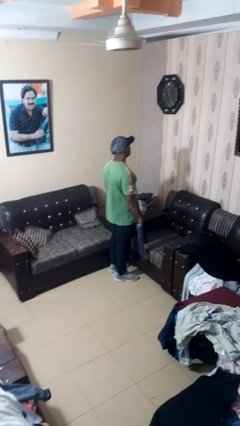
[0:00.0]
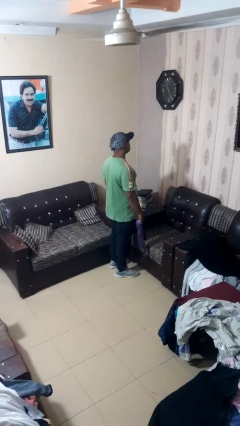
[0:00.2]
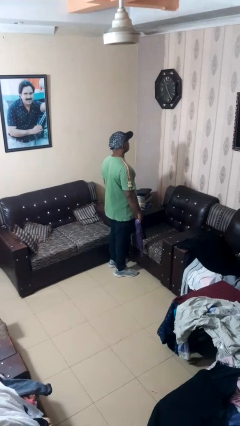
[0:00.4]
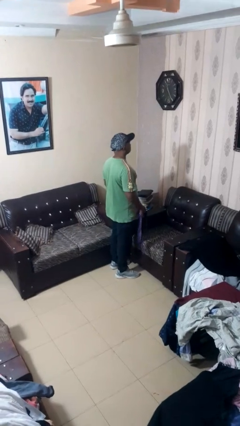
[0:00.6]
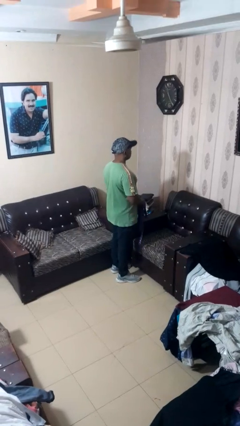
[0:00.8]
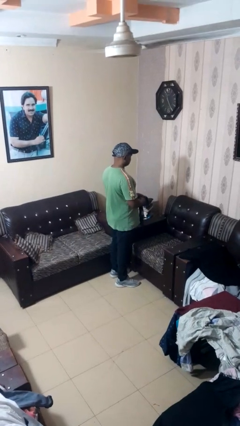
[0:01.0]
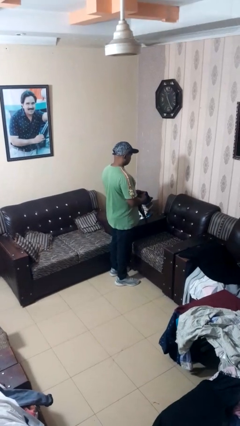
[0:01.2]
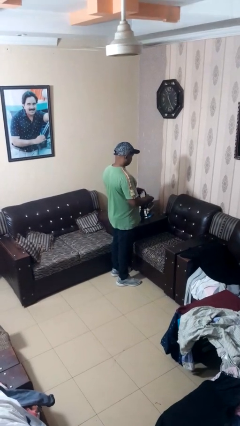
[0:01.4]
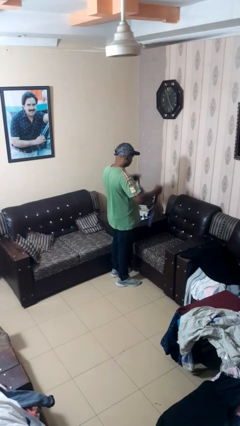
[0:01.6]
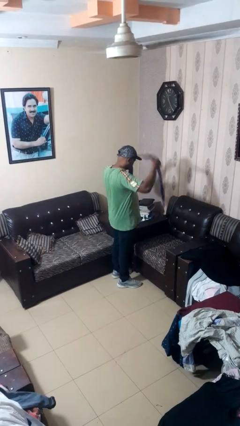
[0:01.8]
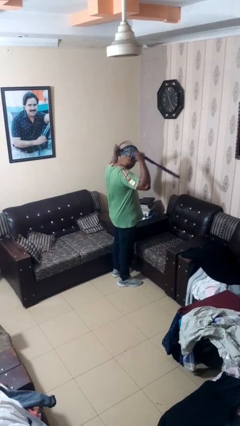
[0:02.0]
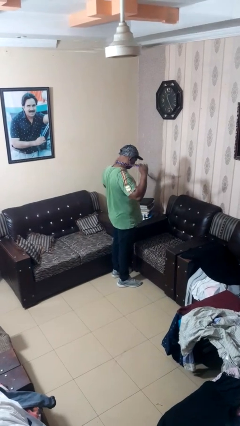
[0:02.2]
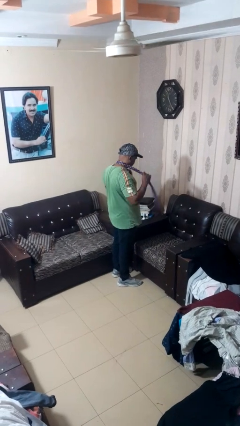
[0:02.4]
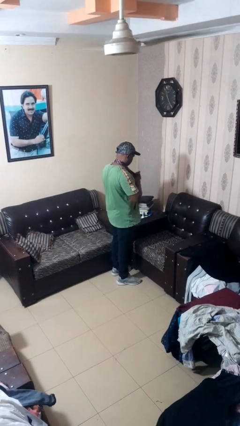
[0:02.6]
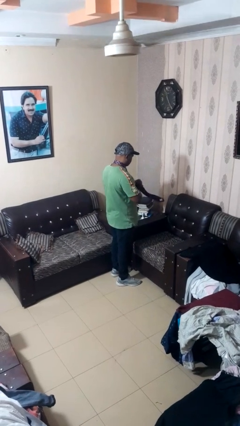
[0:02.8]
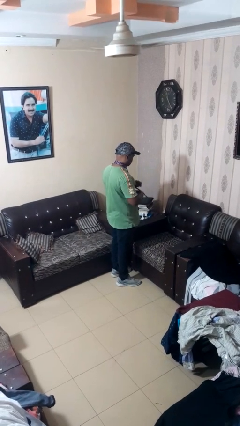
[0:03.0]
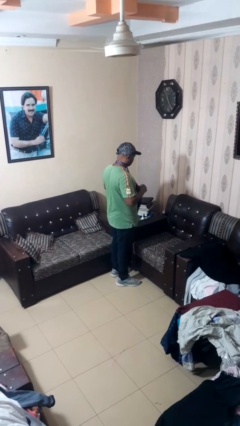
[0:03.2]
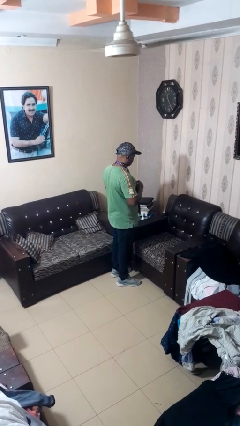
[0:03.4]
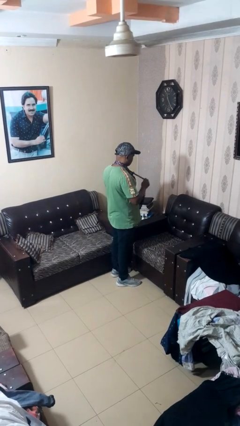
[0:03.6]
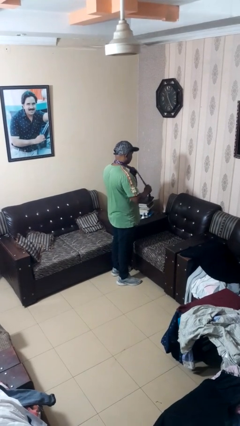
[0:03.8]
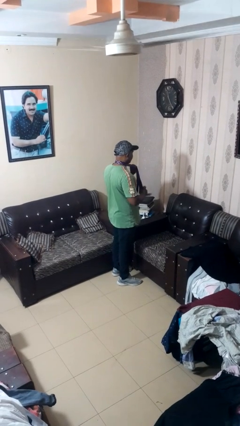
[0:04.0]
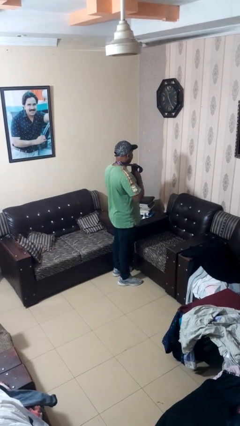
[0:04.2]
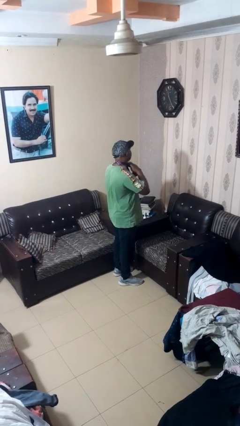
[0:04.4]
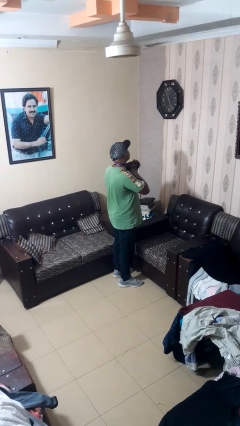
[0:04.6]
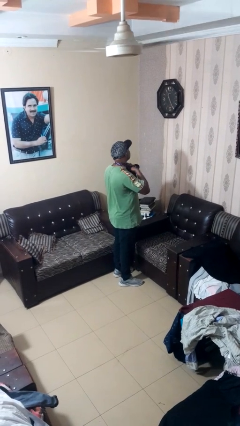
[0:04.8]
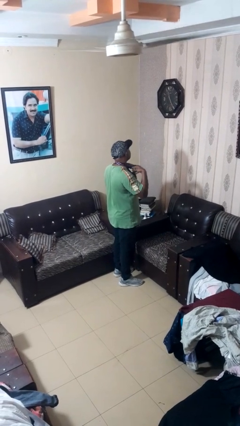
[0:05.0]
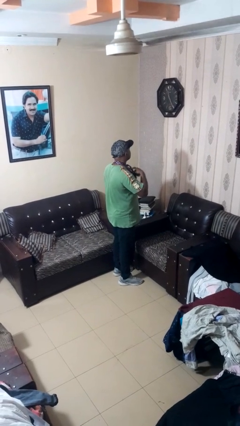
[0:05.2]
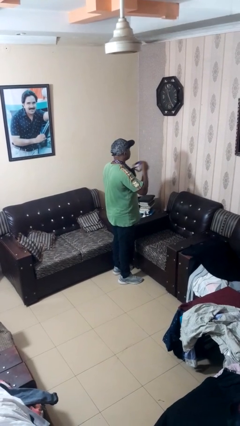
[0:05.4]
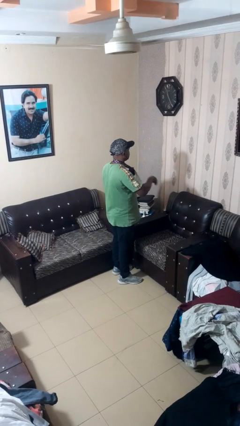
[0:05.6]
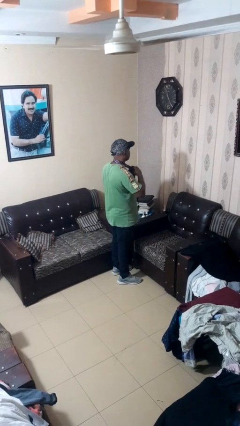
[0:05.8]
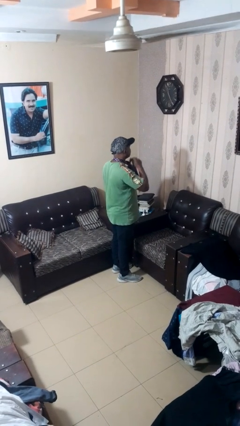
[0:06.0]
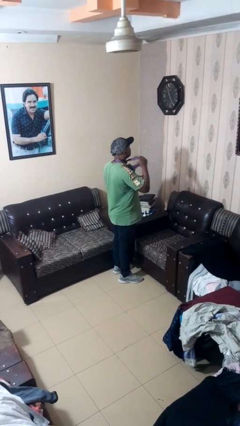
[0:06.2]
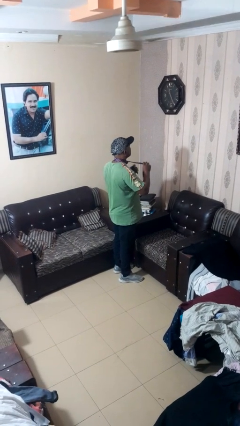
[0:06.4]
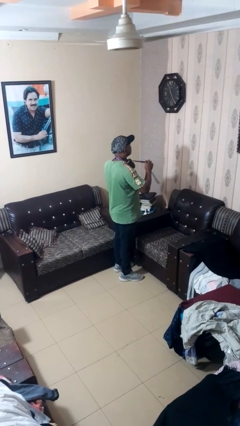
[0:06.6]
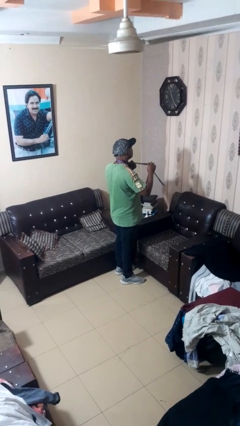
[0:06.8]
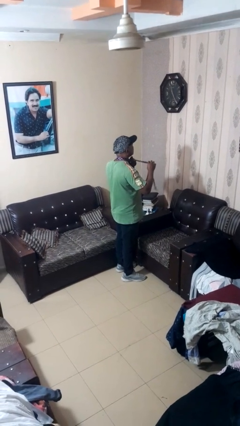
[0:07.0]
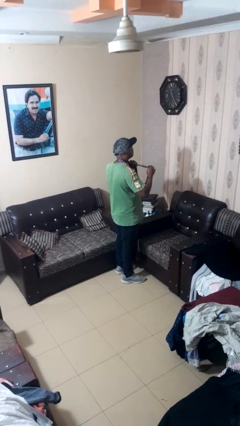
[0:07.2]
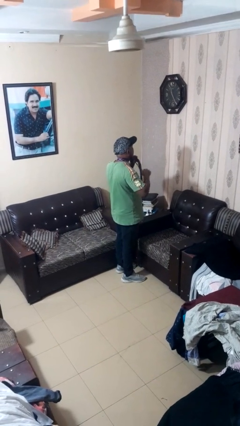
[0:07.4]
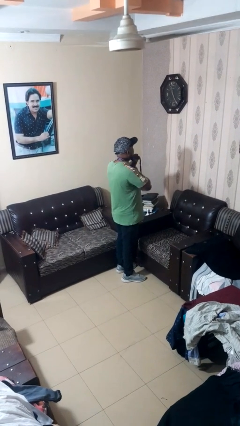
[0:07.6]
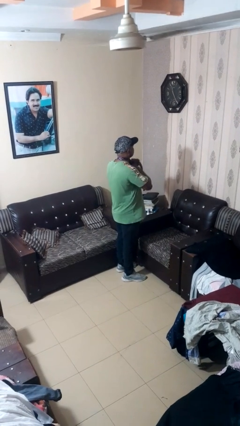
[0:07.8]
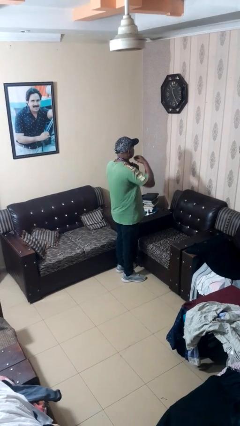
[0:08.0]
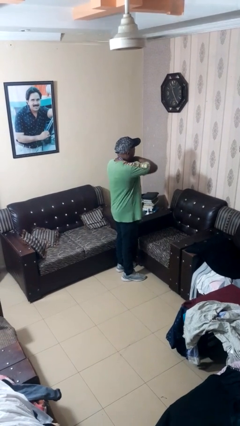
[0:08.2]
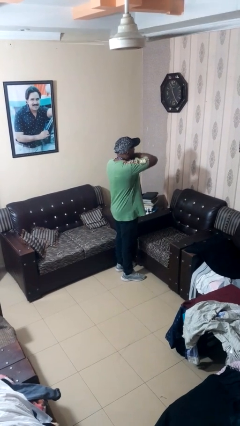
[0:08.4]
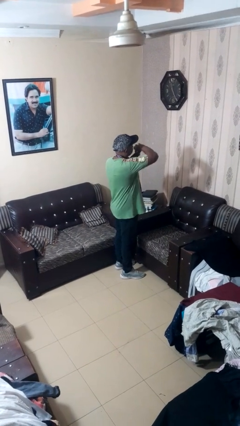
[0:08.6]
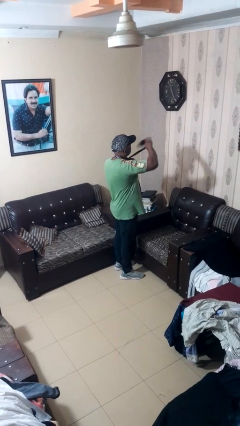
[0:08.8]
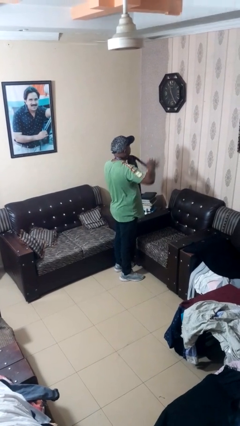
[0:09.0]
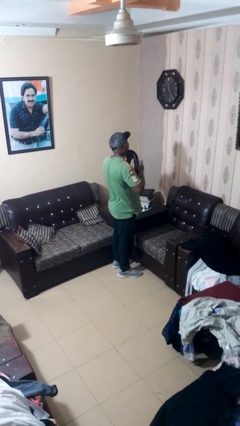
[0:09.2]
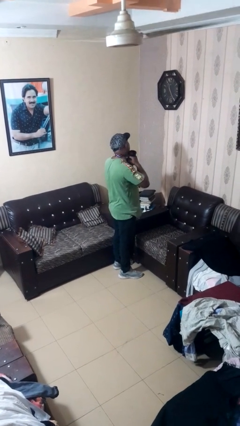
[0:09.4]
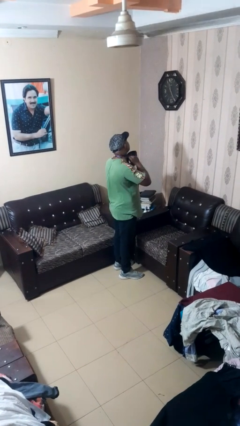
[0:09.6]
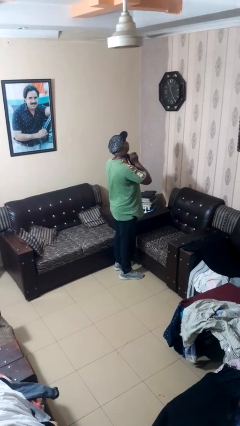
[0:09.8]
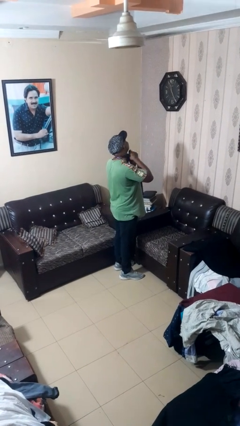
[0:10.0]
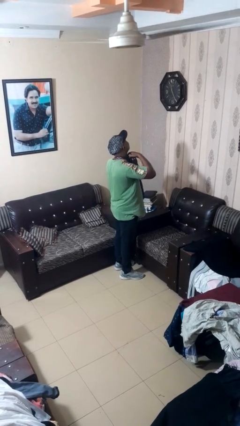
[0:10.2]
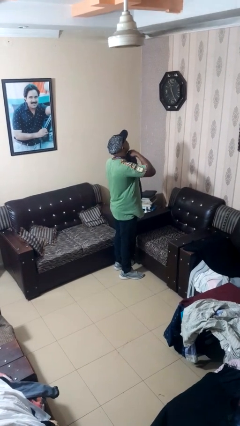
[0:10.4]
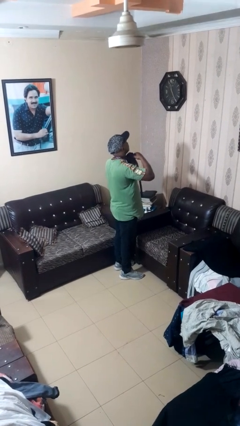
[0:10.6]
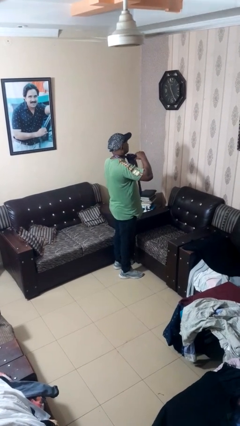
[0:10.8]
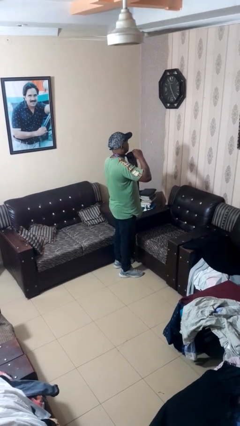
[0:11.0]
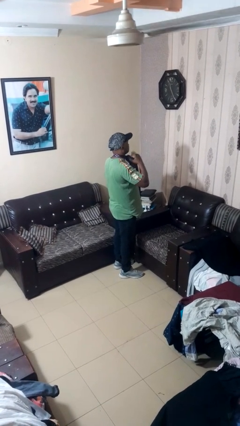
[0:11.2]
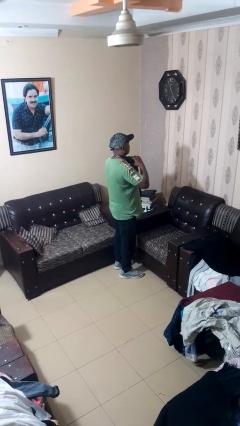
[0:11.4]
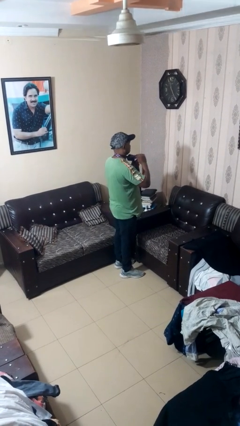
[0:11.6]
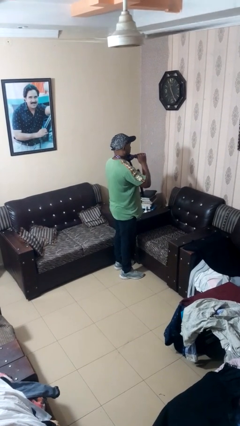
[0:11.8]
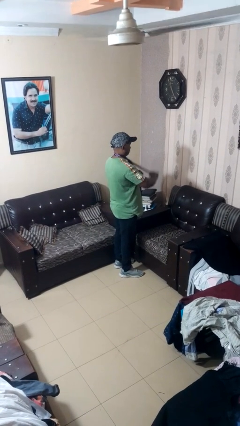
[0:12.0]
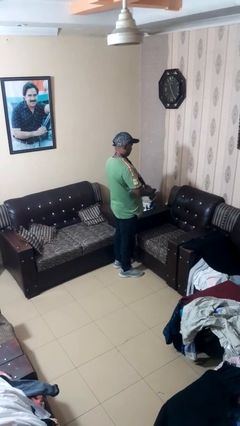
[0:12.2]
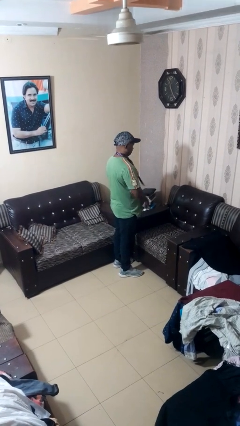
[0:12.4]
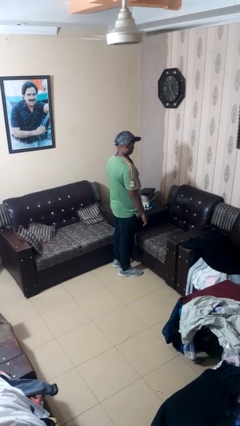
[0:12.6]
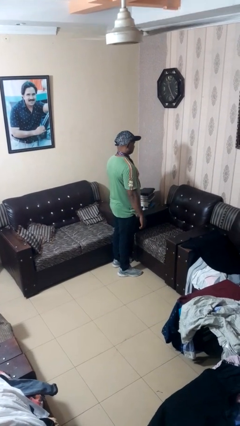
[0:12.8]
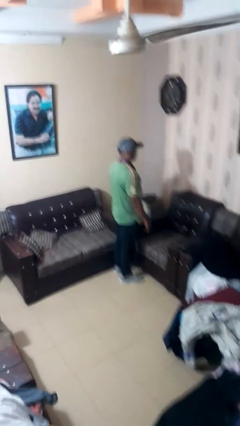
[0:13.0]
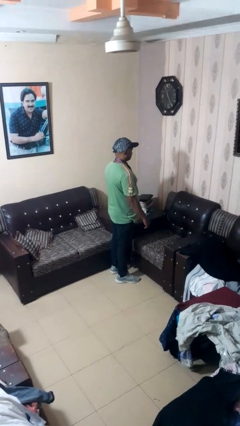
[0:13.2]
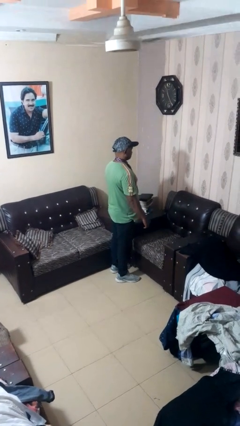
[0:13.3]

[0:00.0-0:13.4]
person puts on necktie

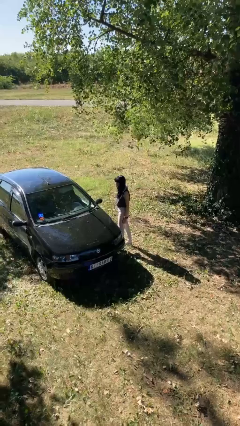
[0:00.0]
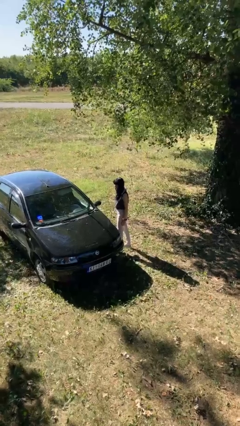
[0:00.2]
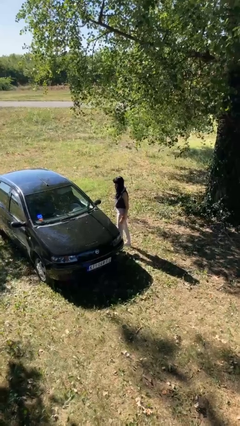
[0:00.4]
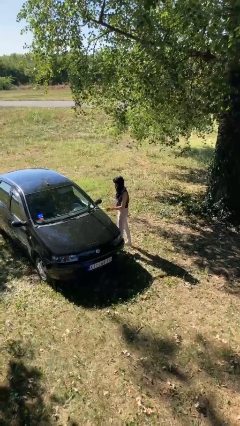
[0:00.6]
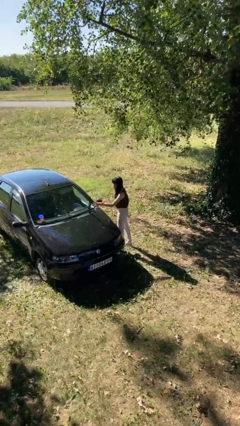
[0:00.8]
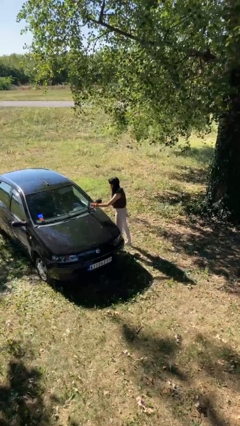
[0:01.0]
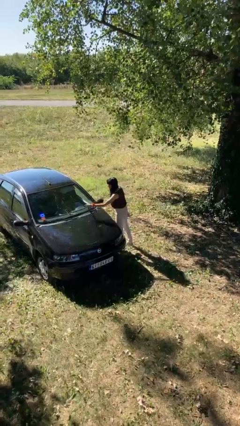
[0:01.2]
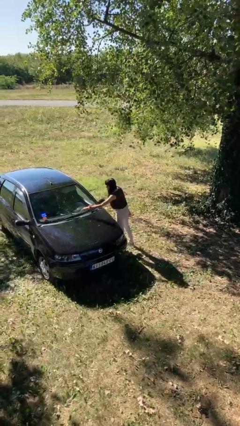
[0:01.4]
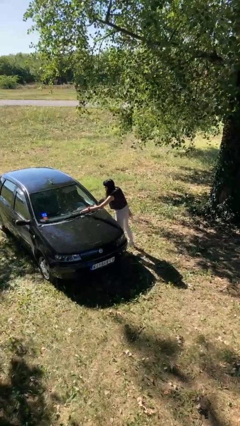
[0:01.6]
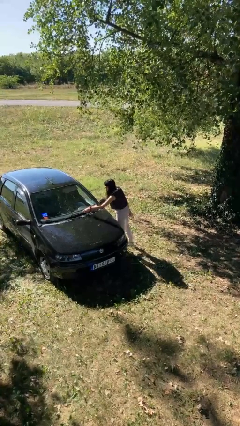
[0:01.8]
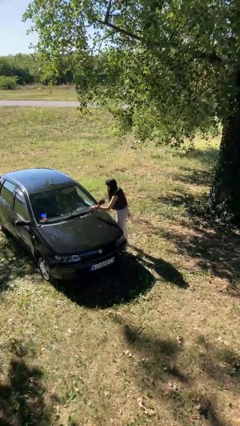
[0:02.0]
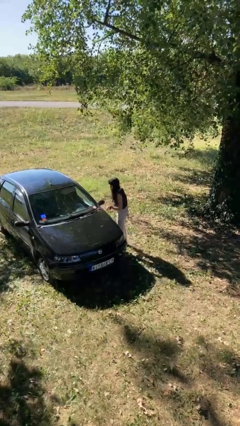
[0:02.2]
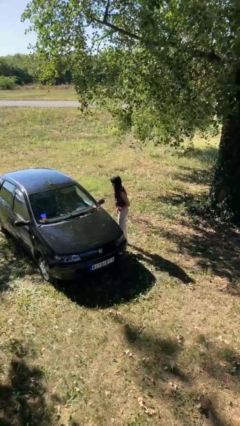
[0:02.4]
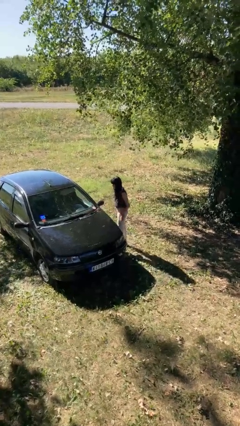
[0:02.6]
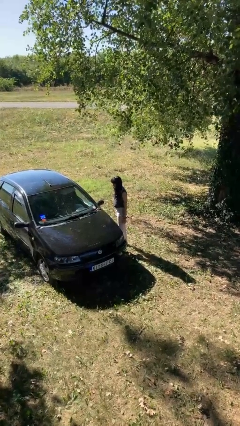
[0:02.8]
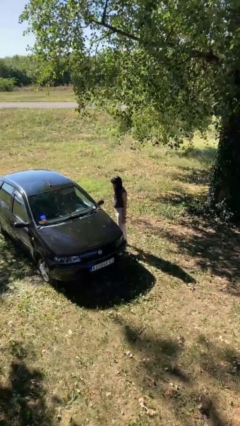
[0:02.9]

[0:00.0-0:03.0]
person flips down car wipers

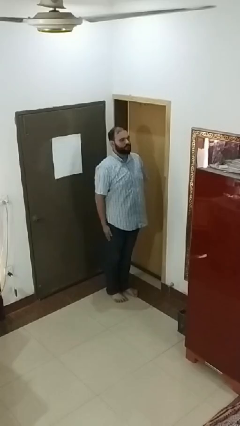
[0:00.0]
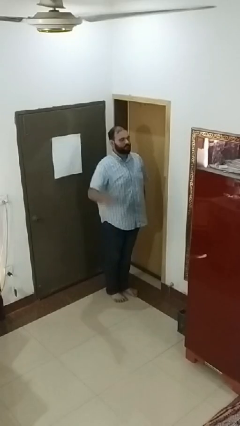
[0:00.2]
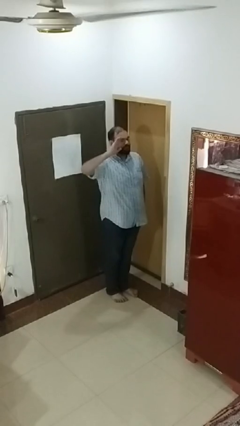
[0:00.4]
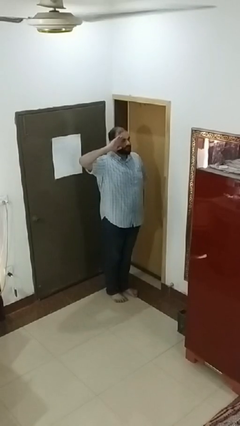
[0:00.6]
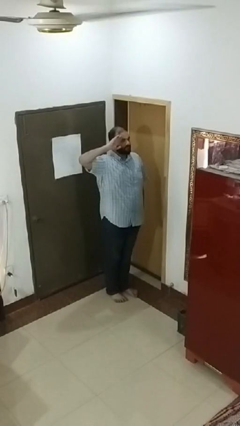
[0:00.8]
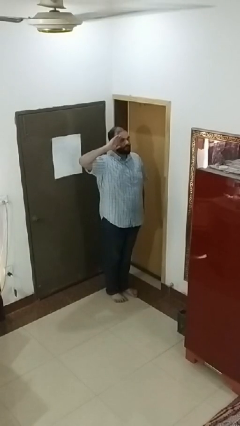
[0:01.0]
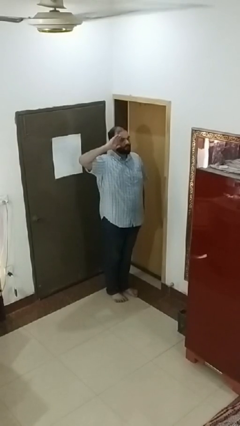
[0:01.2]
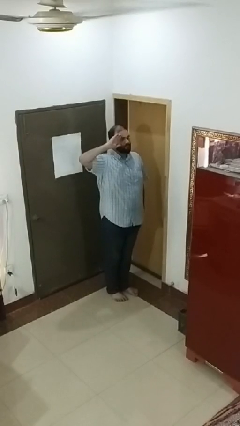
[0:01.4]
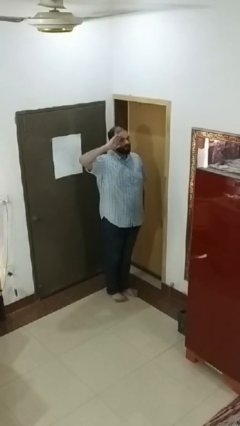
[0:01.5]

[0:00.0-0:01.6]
person salutes
